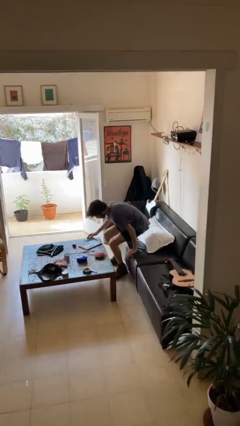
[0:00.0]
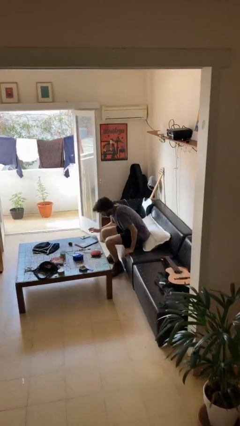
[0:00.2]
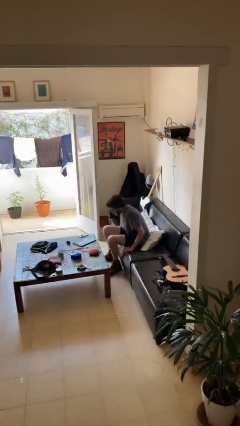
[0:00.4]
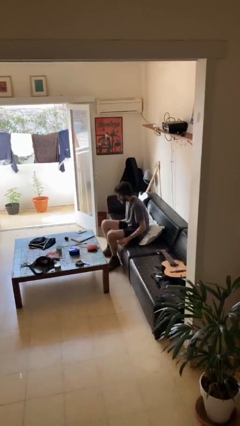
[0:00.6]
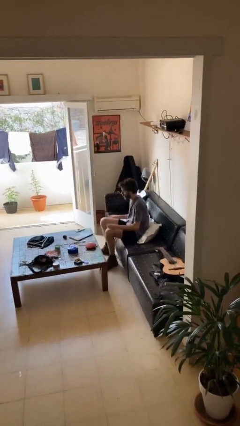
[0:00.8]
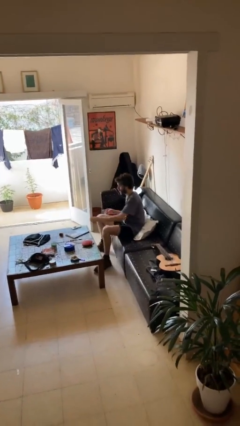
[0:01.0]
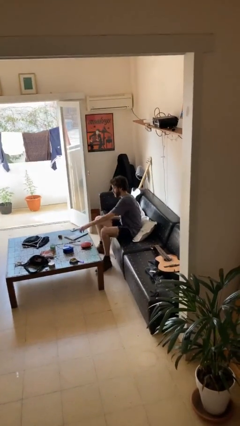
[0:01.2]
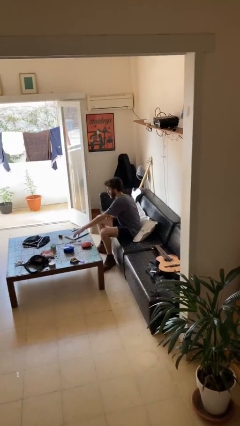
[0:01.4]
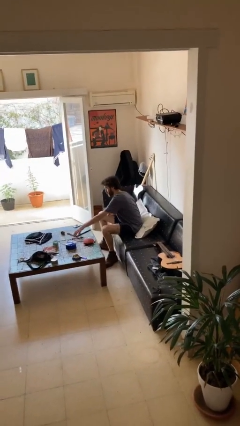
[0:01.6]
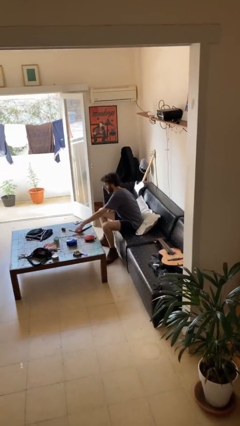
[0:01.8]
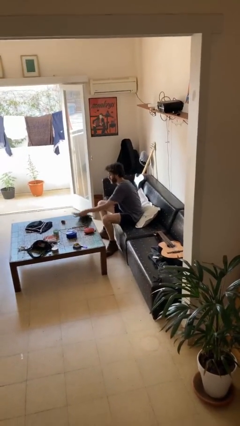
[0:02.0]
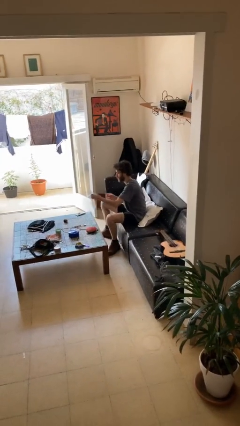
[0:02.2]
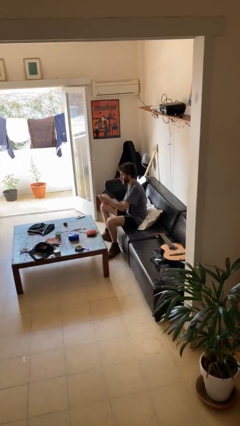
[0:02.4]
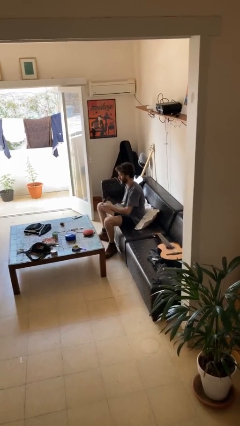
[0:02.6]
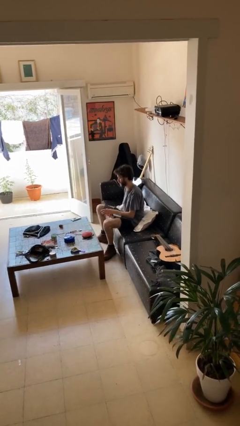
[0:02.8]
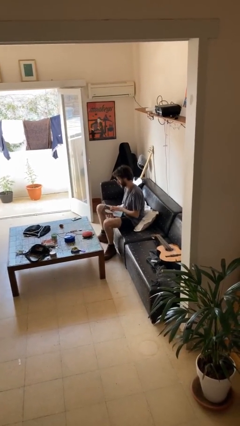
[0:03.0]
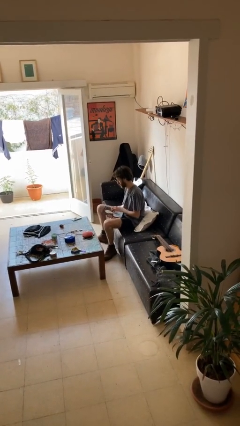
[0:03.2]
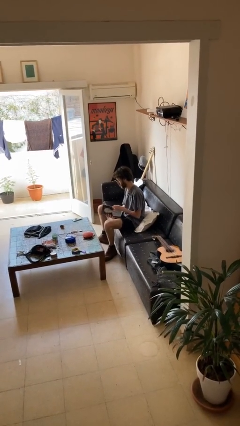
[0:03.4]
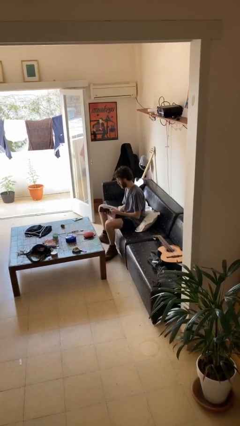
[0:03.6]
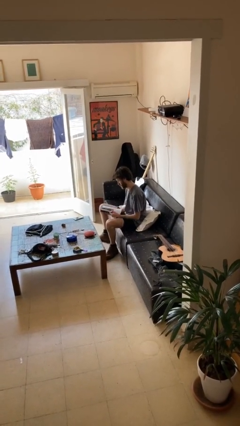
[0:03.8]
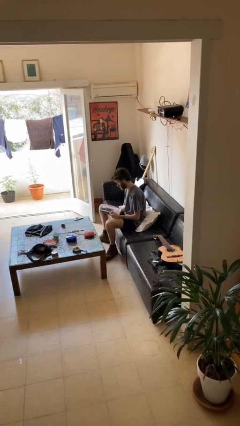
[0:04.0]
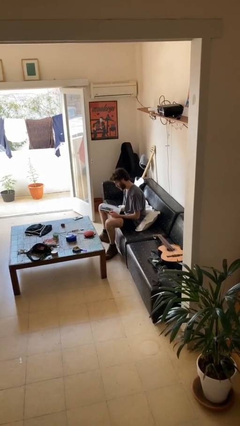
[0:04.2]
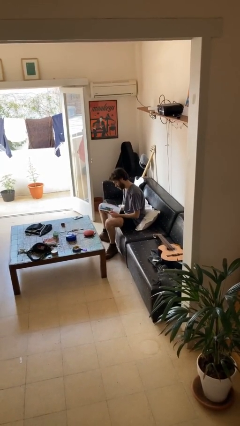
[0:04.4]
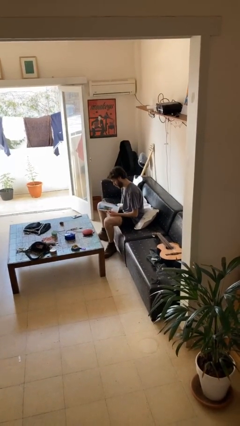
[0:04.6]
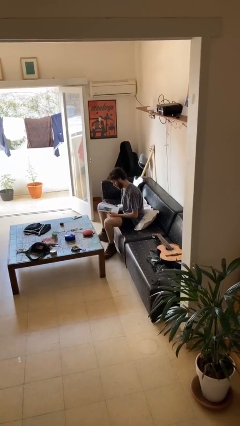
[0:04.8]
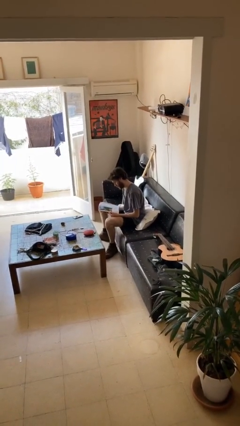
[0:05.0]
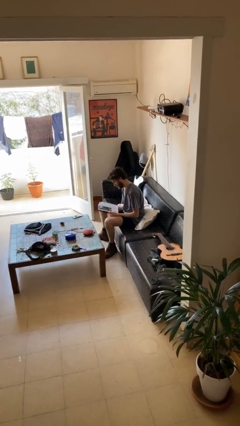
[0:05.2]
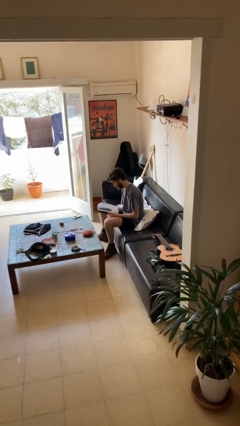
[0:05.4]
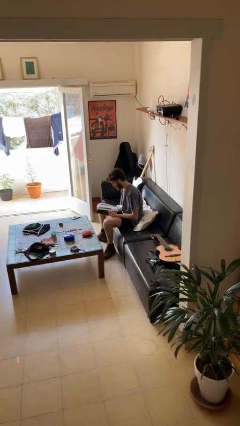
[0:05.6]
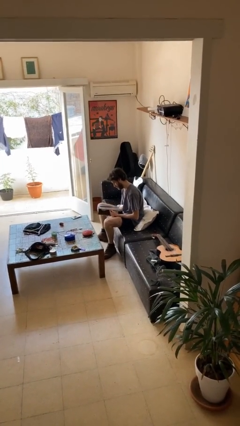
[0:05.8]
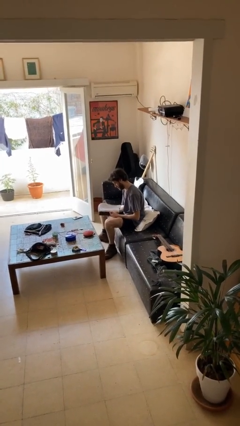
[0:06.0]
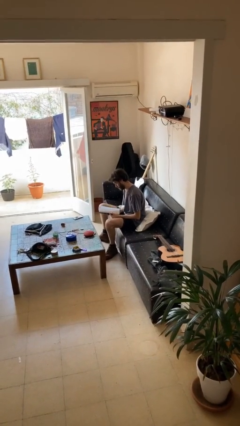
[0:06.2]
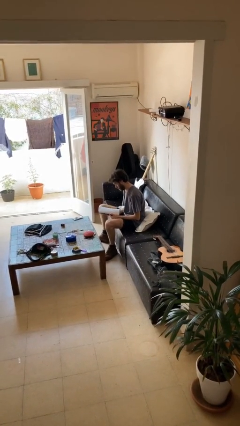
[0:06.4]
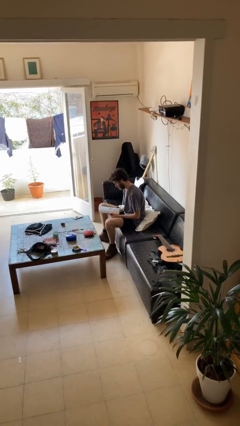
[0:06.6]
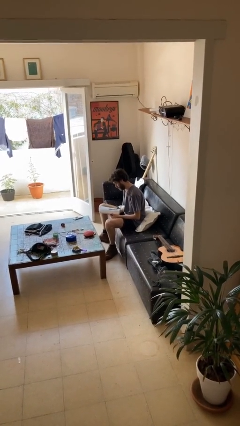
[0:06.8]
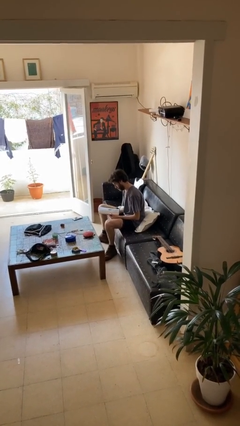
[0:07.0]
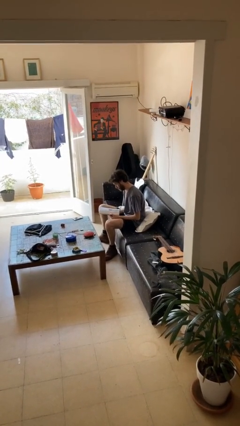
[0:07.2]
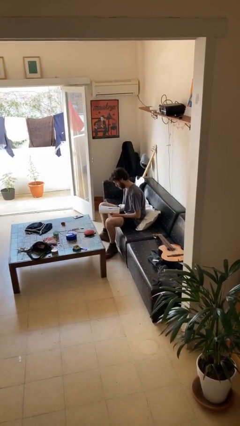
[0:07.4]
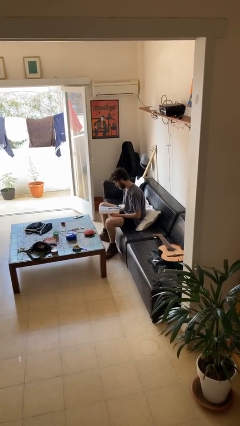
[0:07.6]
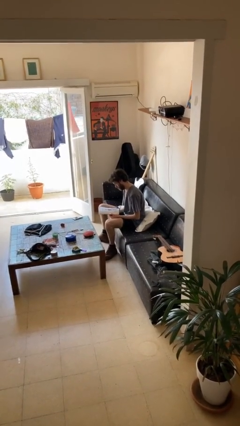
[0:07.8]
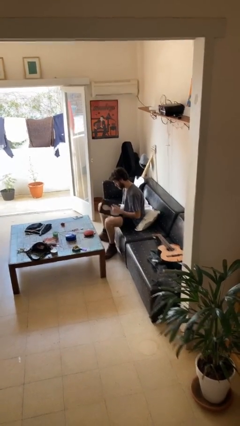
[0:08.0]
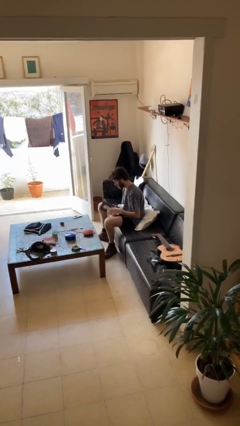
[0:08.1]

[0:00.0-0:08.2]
person reads document

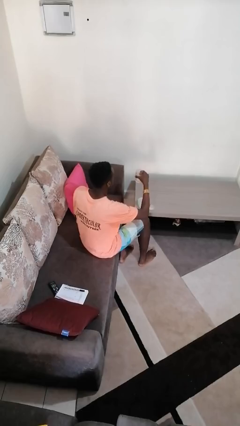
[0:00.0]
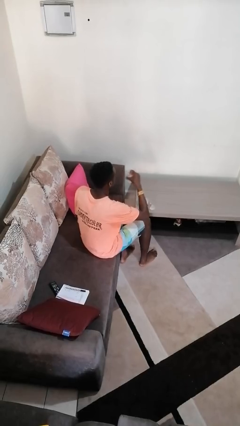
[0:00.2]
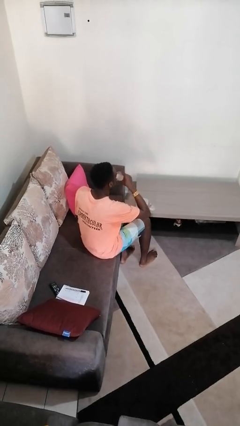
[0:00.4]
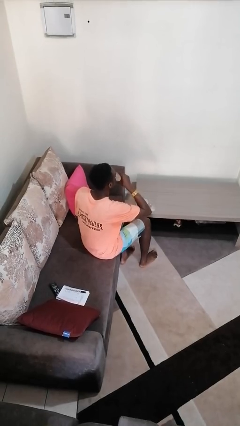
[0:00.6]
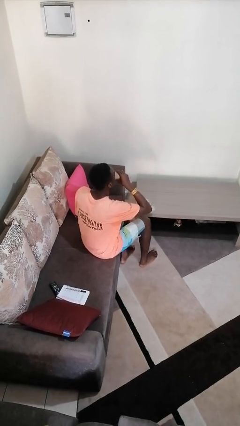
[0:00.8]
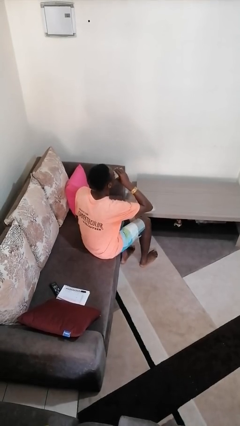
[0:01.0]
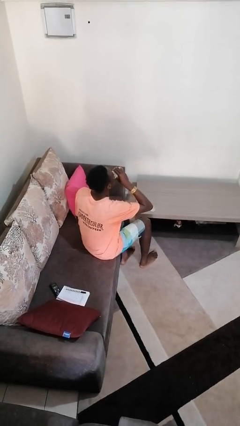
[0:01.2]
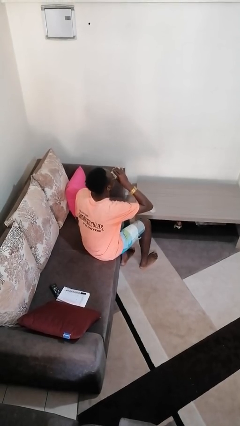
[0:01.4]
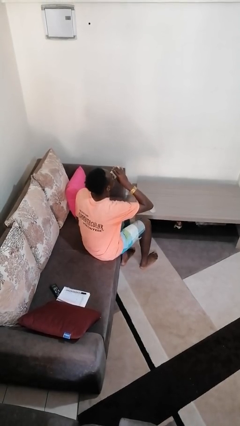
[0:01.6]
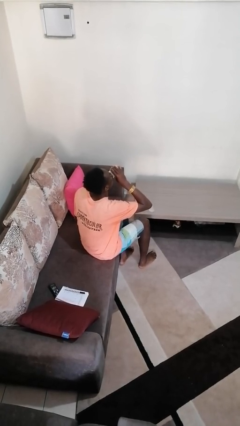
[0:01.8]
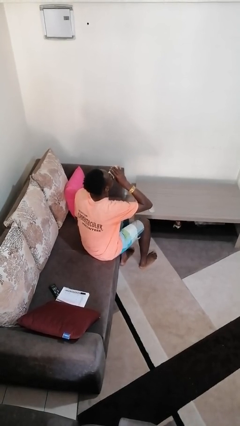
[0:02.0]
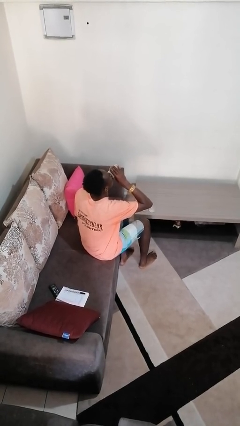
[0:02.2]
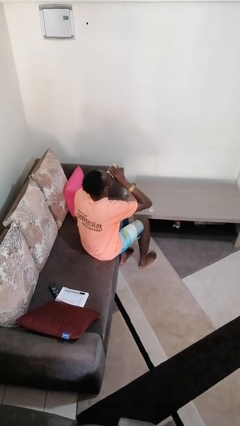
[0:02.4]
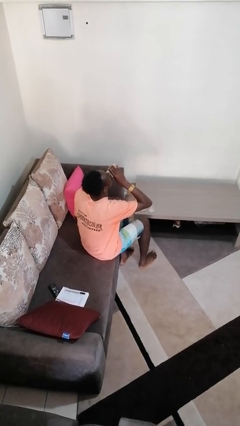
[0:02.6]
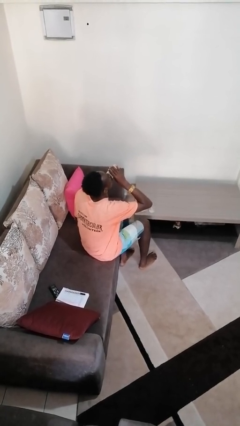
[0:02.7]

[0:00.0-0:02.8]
person drinks from shotglass

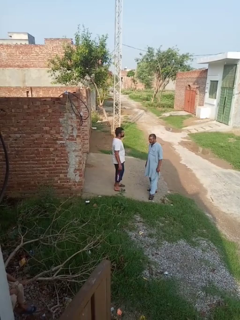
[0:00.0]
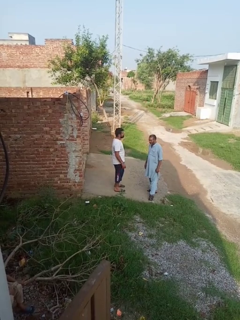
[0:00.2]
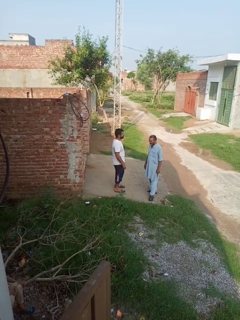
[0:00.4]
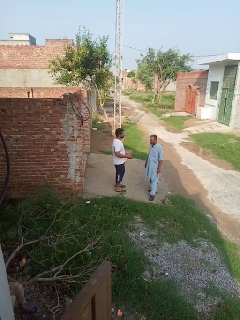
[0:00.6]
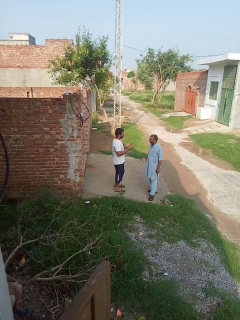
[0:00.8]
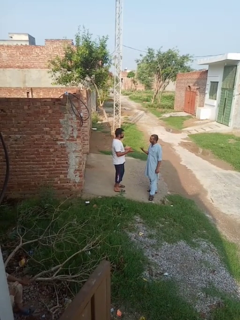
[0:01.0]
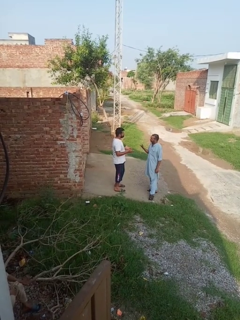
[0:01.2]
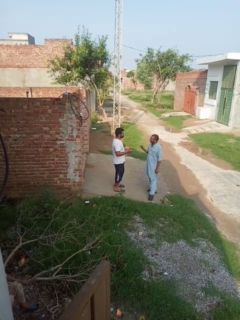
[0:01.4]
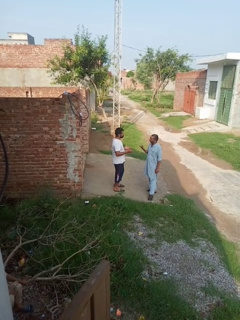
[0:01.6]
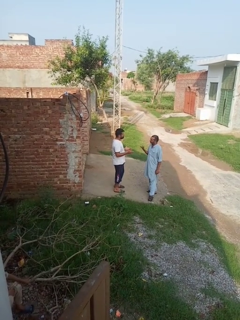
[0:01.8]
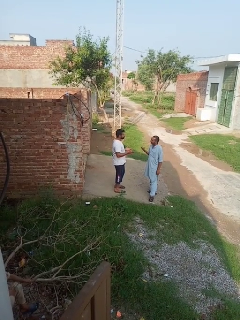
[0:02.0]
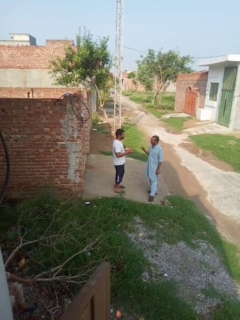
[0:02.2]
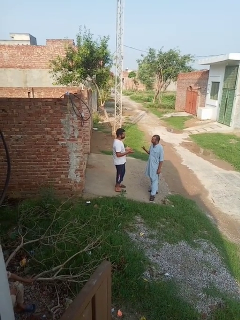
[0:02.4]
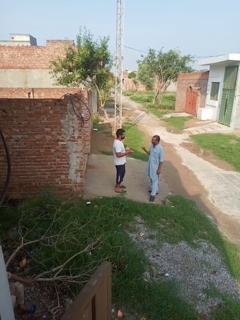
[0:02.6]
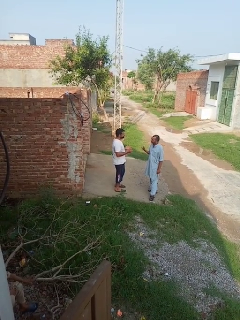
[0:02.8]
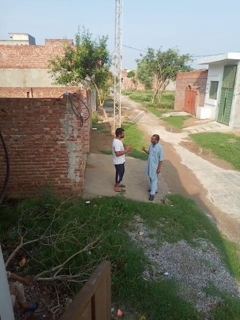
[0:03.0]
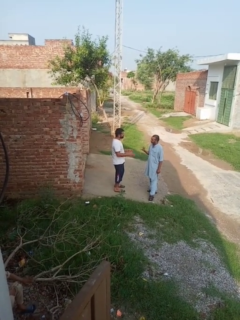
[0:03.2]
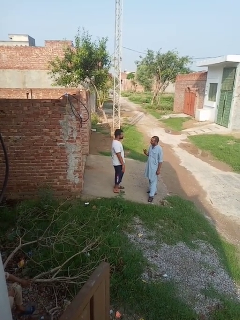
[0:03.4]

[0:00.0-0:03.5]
person talks to person

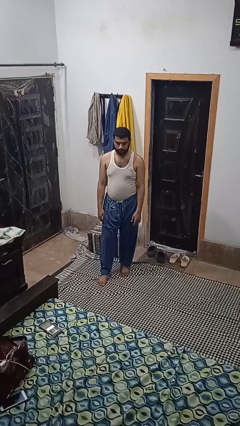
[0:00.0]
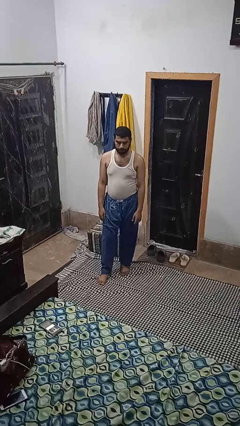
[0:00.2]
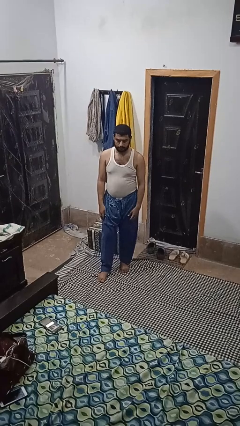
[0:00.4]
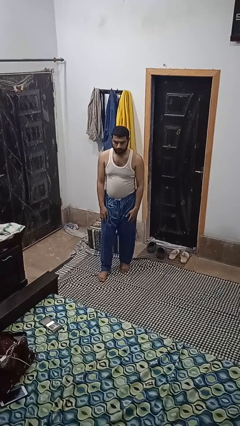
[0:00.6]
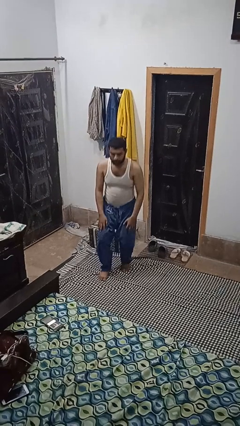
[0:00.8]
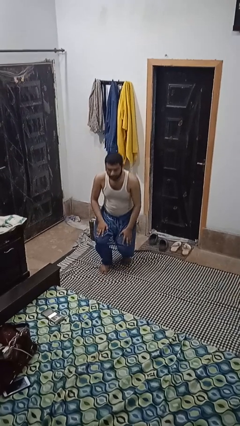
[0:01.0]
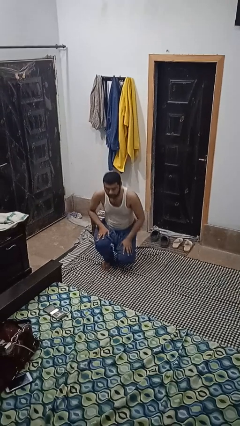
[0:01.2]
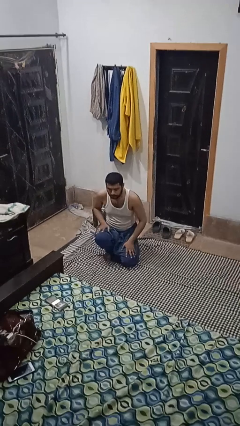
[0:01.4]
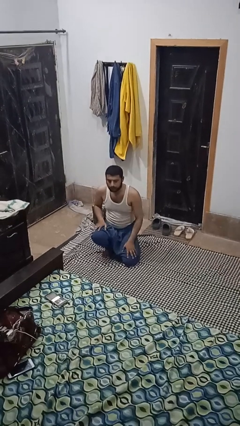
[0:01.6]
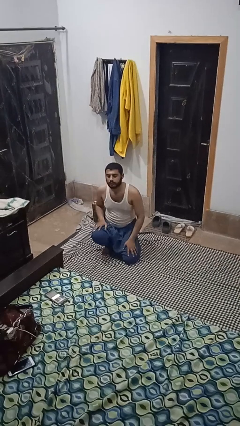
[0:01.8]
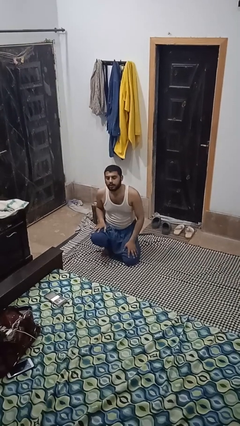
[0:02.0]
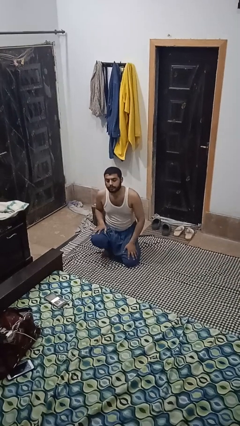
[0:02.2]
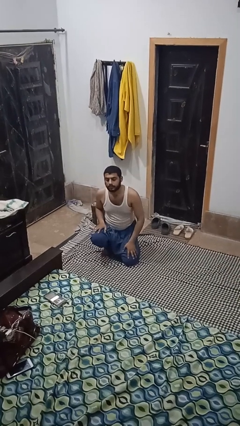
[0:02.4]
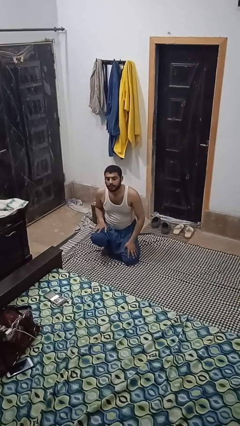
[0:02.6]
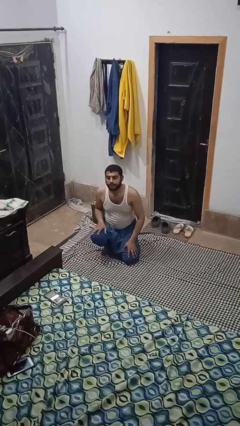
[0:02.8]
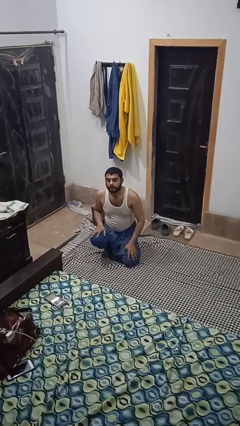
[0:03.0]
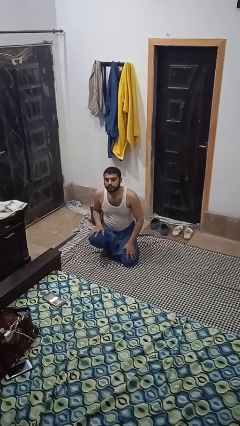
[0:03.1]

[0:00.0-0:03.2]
person kneels

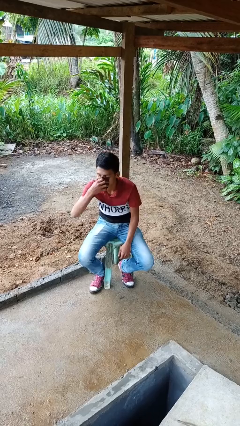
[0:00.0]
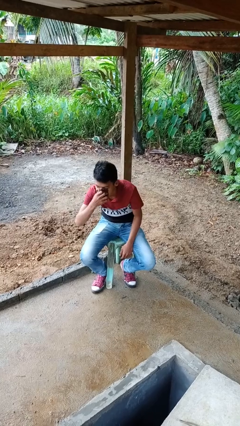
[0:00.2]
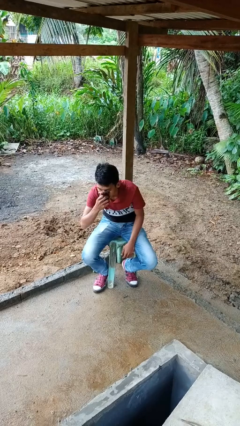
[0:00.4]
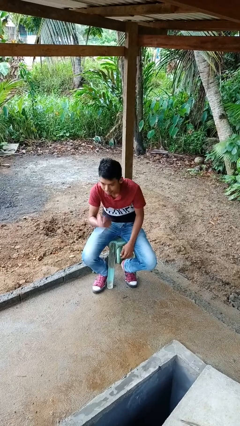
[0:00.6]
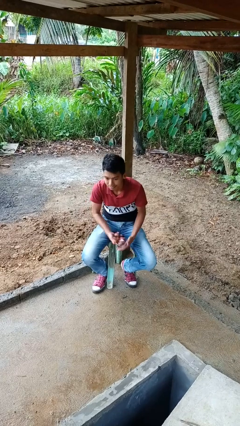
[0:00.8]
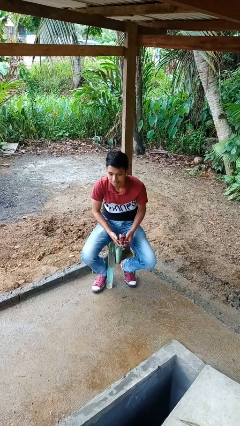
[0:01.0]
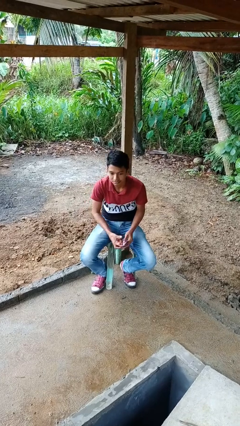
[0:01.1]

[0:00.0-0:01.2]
person blows nose
